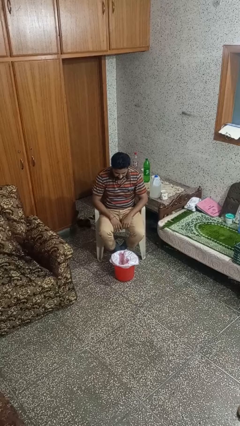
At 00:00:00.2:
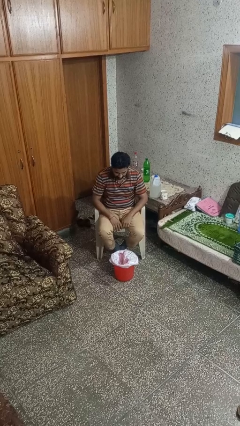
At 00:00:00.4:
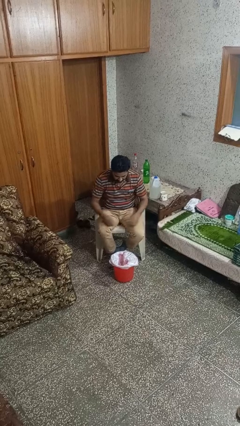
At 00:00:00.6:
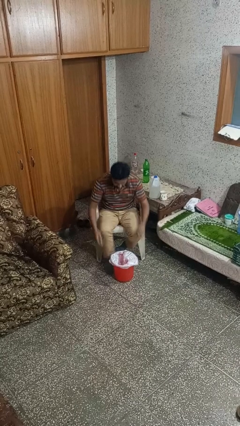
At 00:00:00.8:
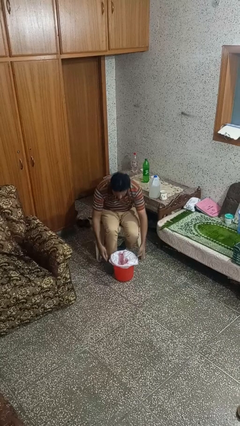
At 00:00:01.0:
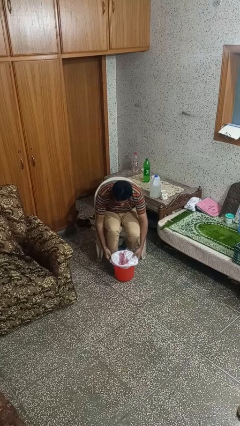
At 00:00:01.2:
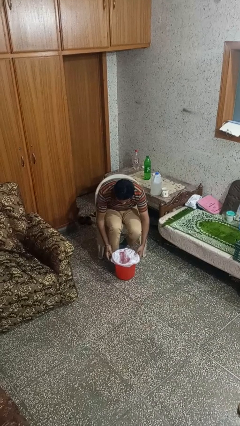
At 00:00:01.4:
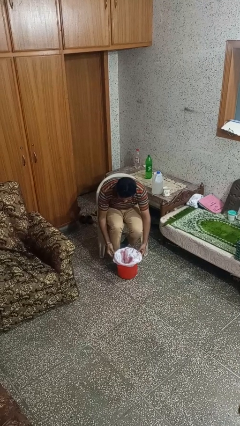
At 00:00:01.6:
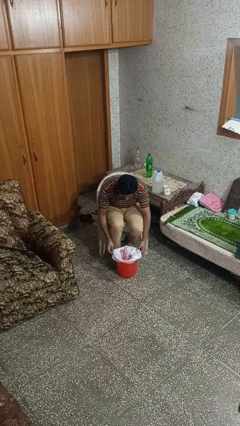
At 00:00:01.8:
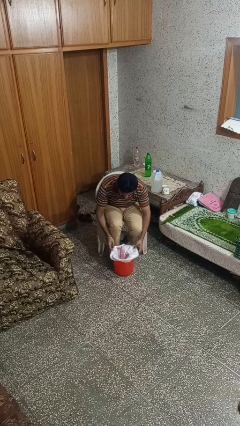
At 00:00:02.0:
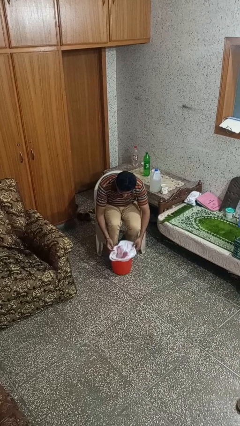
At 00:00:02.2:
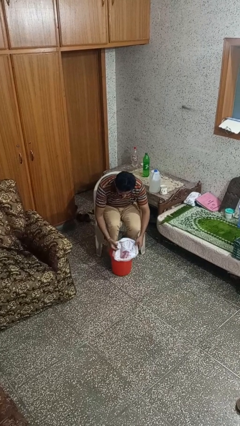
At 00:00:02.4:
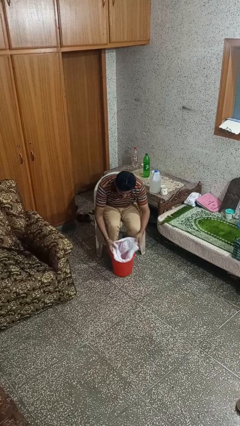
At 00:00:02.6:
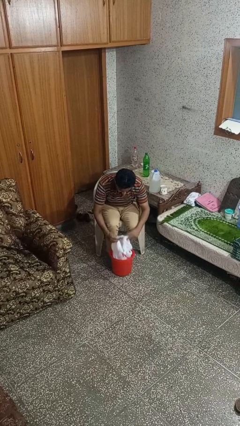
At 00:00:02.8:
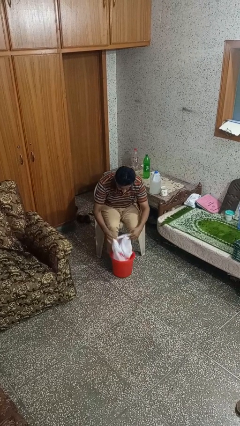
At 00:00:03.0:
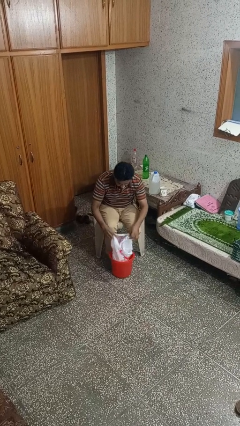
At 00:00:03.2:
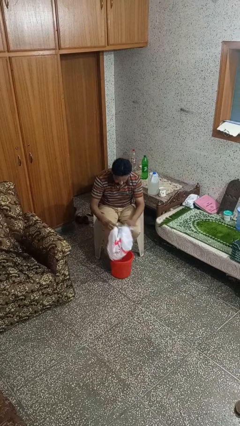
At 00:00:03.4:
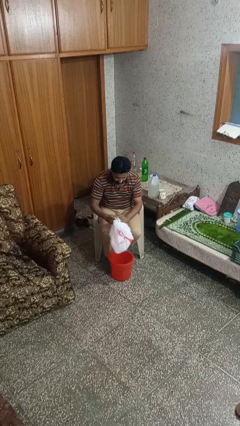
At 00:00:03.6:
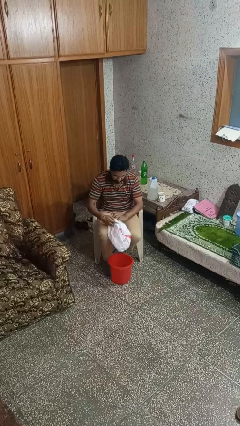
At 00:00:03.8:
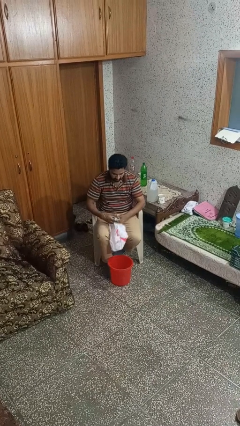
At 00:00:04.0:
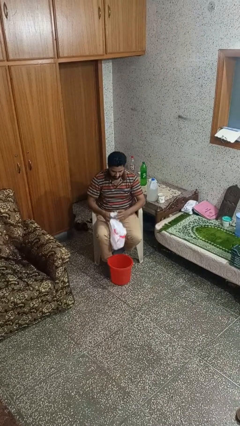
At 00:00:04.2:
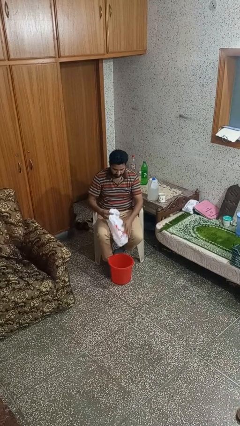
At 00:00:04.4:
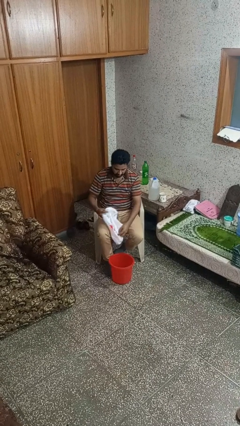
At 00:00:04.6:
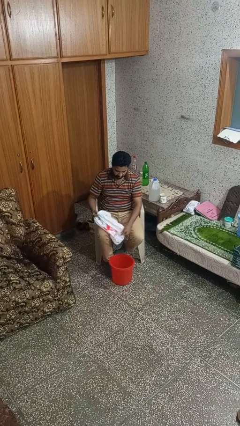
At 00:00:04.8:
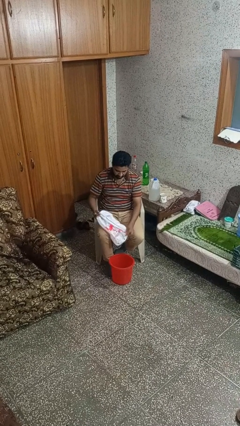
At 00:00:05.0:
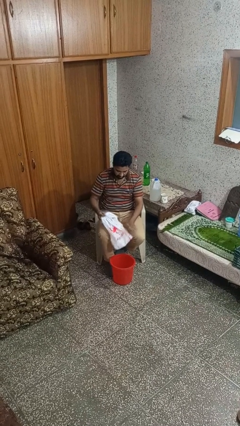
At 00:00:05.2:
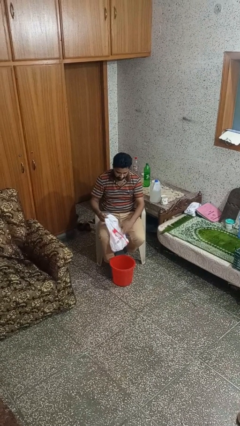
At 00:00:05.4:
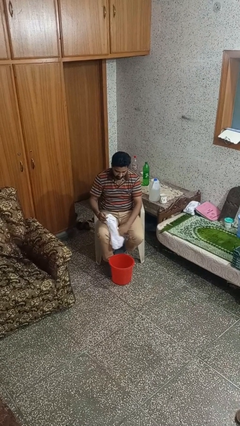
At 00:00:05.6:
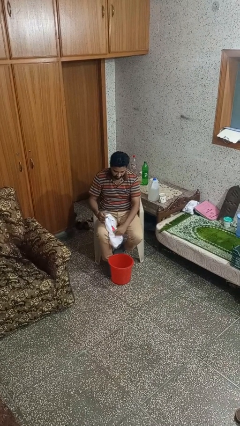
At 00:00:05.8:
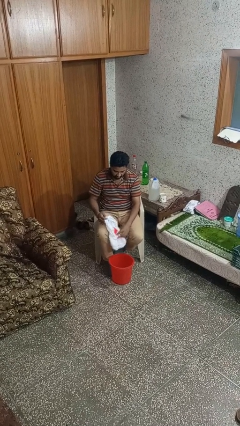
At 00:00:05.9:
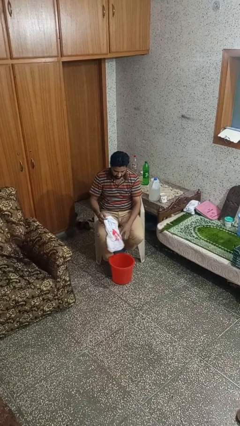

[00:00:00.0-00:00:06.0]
person removes trashbag from trashcan

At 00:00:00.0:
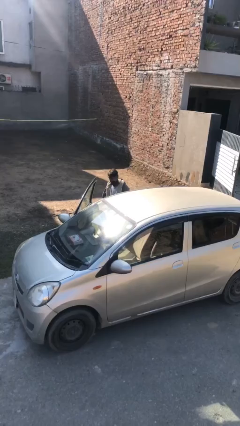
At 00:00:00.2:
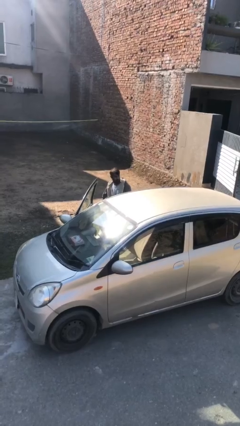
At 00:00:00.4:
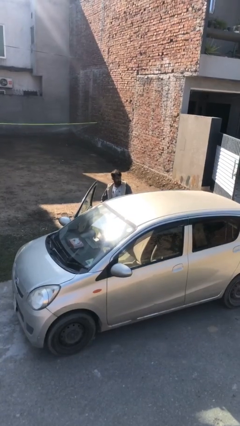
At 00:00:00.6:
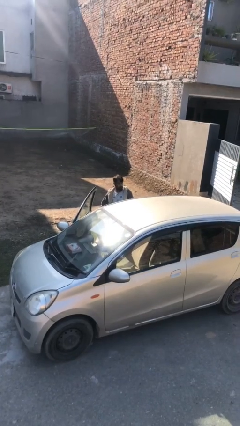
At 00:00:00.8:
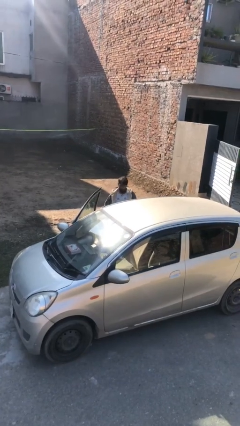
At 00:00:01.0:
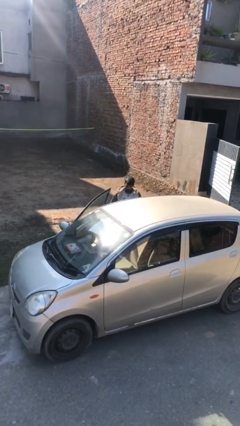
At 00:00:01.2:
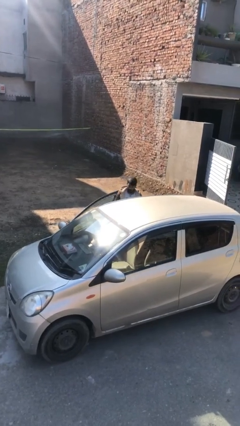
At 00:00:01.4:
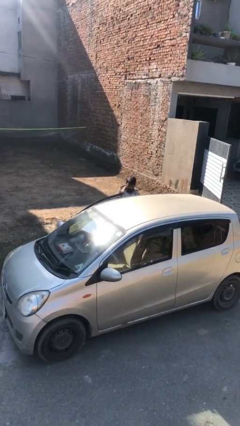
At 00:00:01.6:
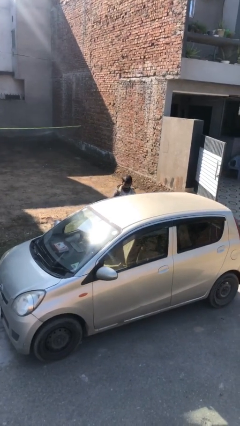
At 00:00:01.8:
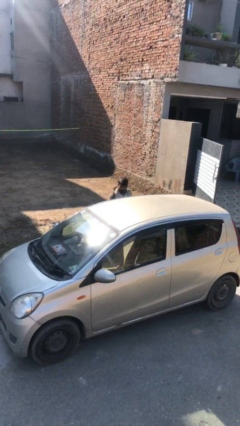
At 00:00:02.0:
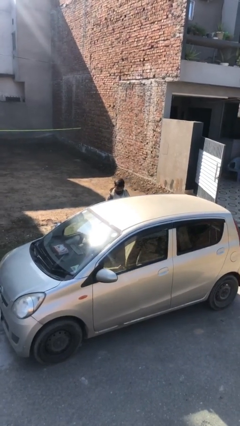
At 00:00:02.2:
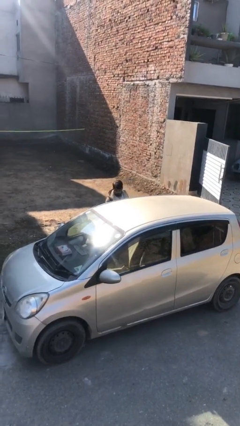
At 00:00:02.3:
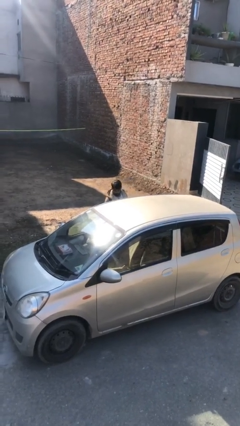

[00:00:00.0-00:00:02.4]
person closes car door

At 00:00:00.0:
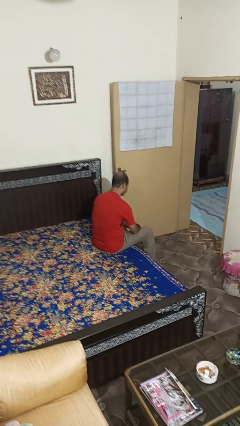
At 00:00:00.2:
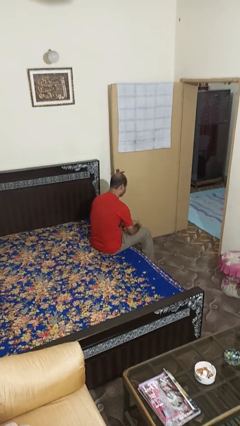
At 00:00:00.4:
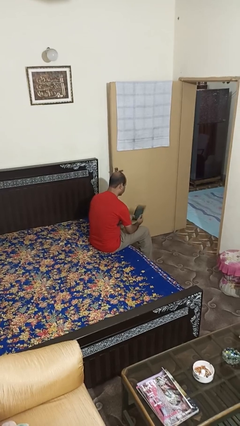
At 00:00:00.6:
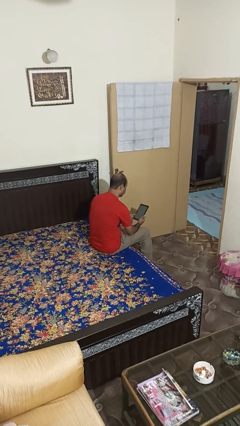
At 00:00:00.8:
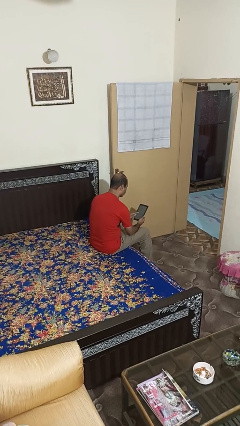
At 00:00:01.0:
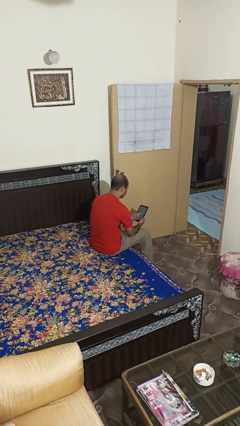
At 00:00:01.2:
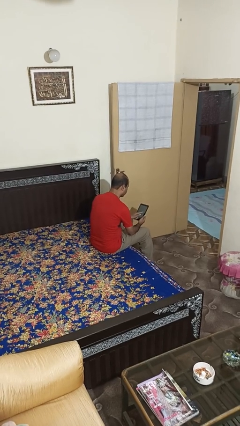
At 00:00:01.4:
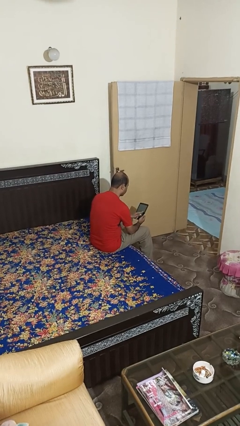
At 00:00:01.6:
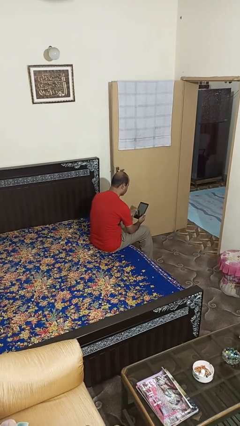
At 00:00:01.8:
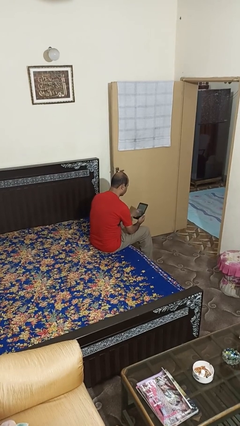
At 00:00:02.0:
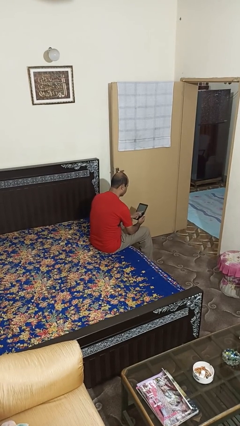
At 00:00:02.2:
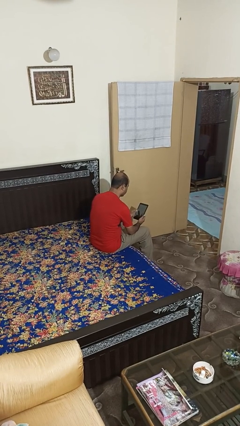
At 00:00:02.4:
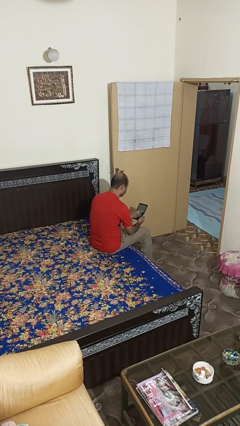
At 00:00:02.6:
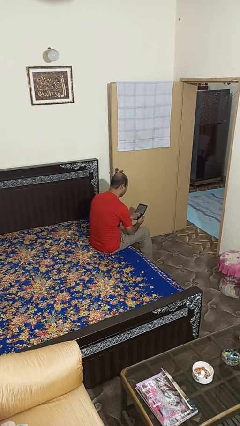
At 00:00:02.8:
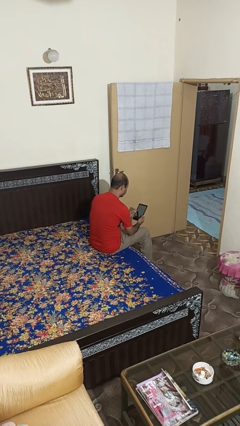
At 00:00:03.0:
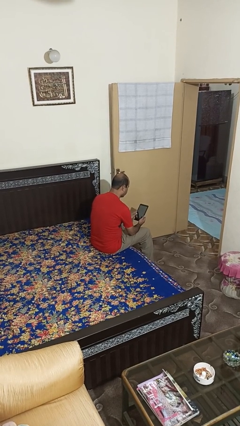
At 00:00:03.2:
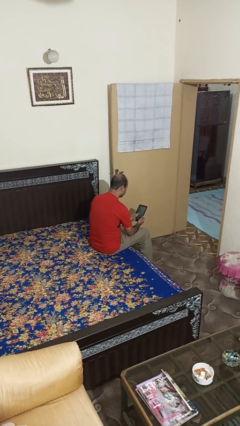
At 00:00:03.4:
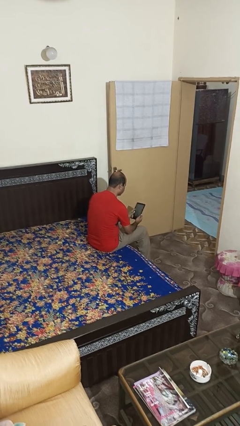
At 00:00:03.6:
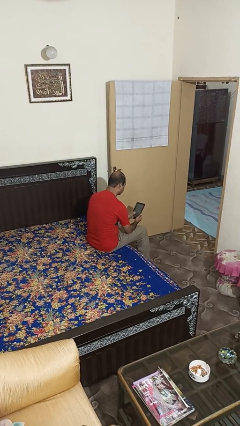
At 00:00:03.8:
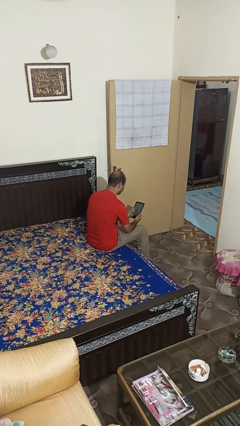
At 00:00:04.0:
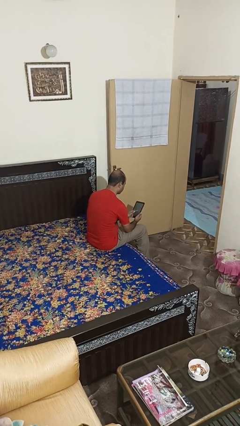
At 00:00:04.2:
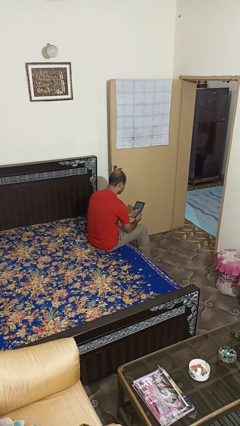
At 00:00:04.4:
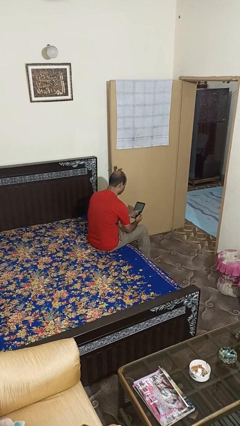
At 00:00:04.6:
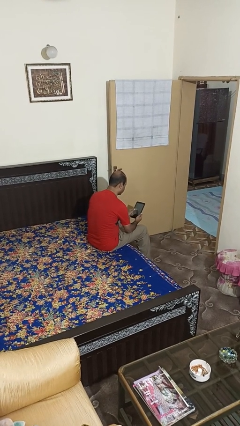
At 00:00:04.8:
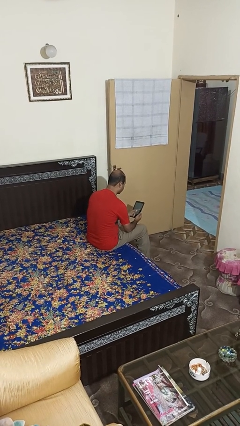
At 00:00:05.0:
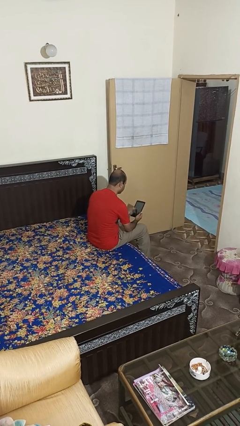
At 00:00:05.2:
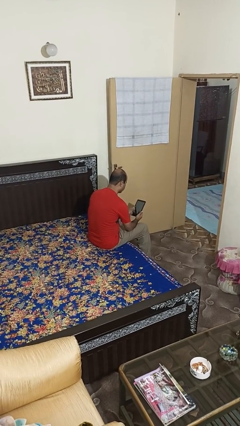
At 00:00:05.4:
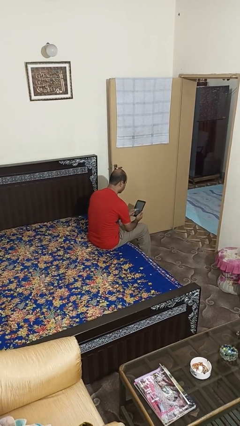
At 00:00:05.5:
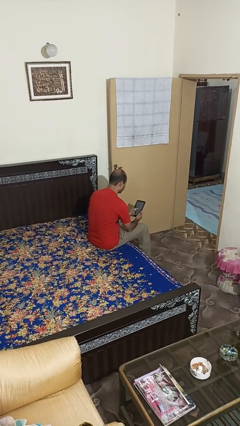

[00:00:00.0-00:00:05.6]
person interacts with tablet

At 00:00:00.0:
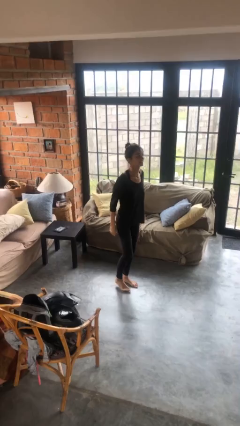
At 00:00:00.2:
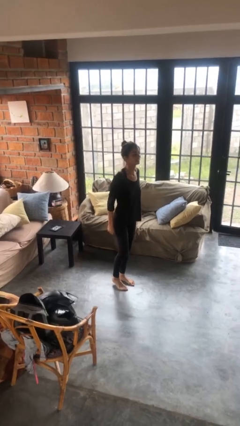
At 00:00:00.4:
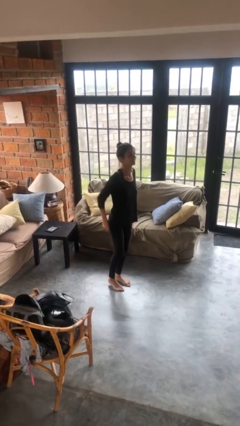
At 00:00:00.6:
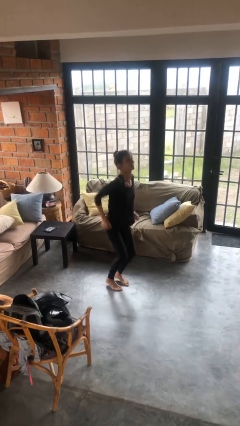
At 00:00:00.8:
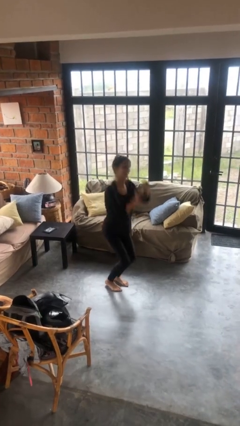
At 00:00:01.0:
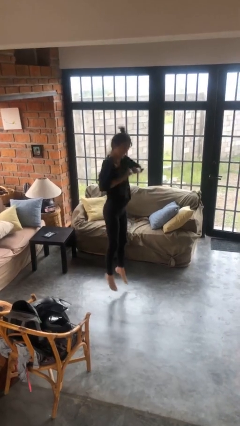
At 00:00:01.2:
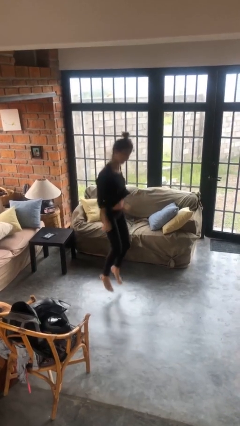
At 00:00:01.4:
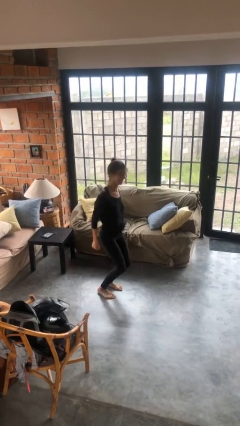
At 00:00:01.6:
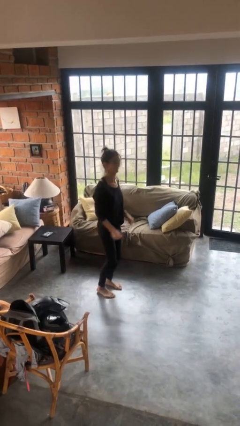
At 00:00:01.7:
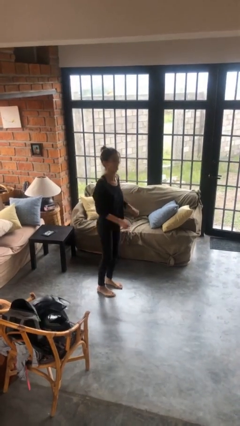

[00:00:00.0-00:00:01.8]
person jumps

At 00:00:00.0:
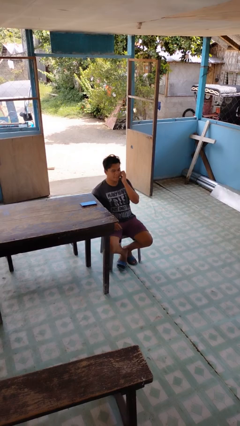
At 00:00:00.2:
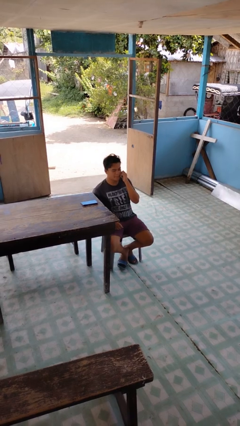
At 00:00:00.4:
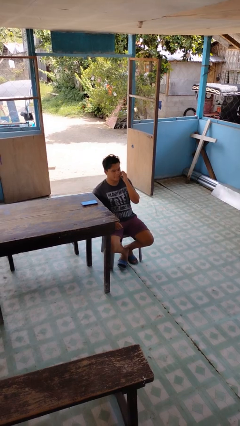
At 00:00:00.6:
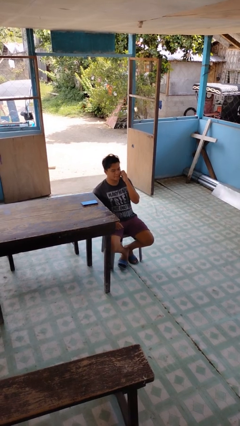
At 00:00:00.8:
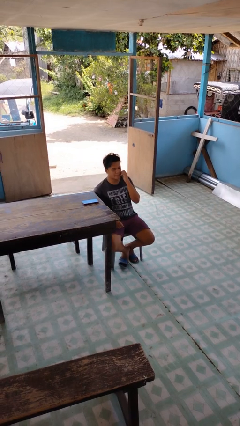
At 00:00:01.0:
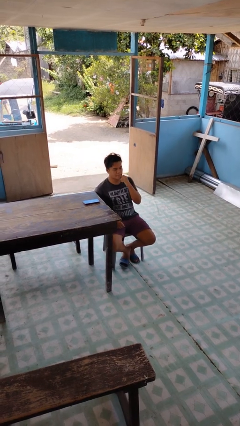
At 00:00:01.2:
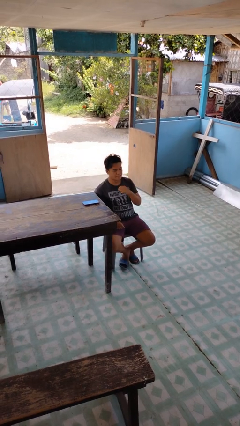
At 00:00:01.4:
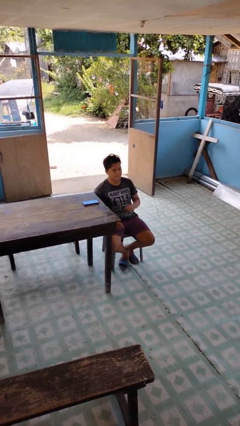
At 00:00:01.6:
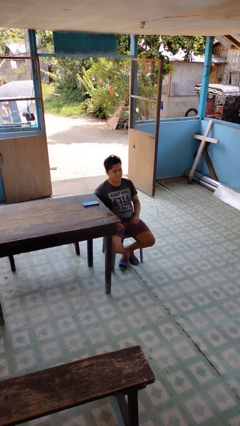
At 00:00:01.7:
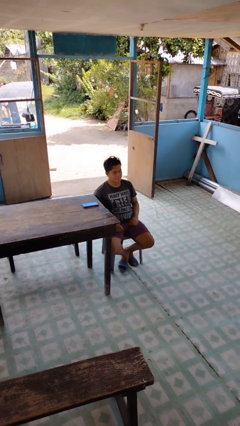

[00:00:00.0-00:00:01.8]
person scratches face
